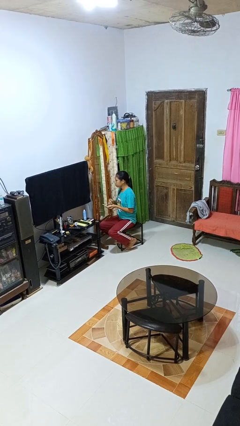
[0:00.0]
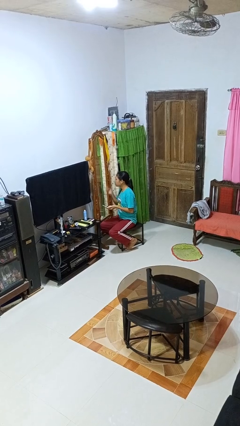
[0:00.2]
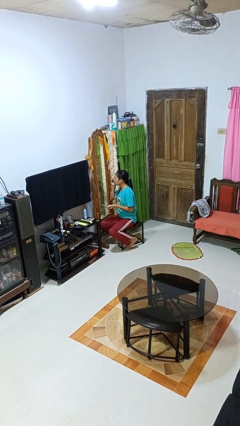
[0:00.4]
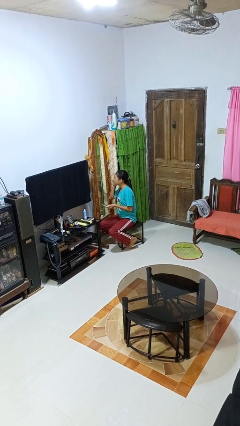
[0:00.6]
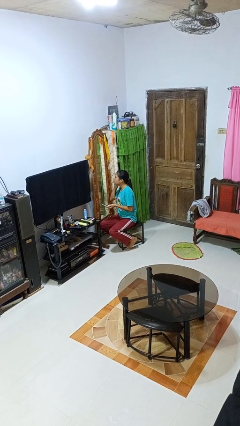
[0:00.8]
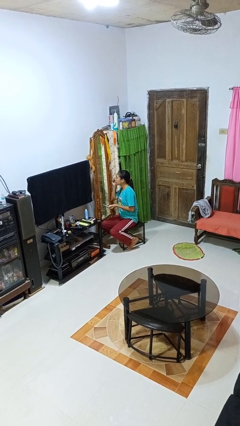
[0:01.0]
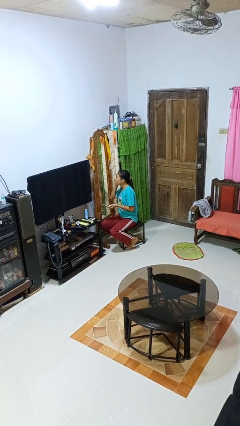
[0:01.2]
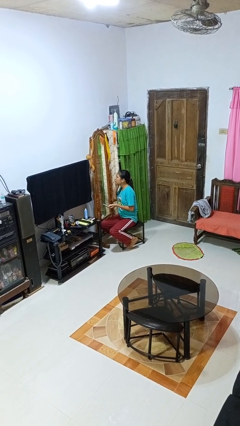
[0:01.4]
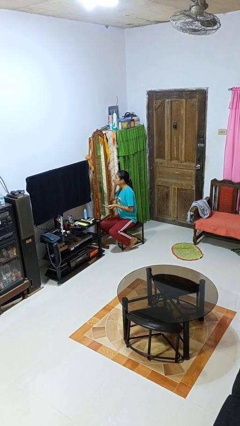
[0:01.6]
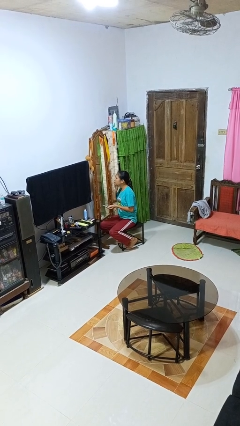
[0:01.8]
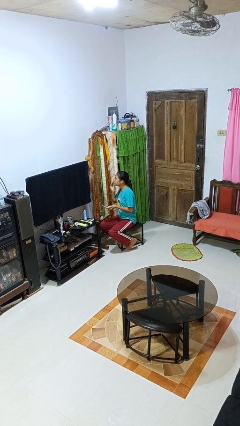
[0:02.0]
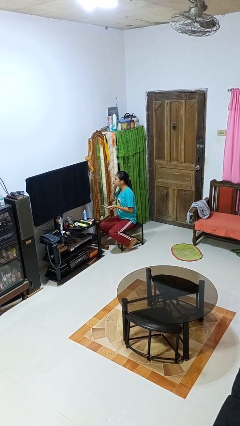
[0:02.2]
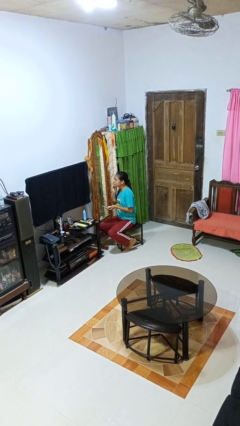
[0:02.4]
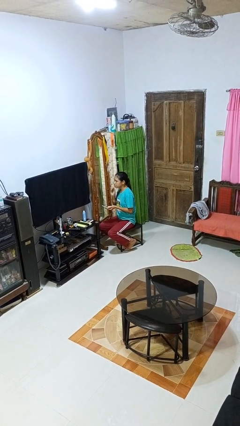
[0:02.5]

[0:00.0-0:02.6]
person applies foundation makeup

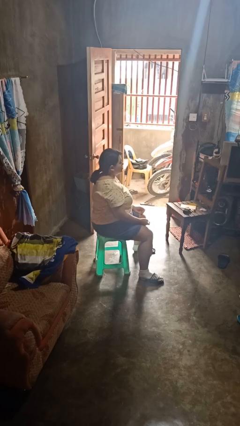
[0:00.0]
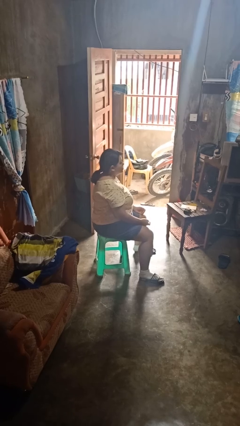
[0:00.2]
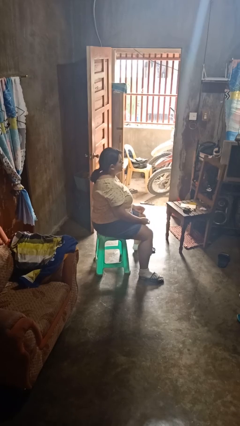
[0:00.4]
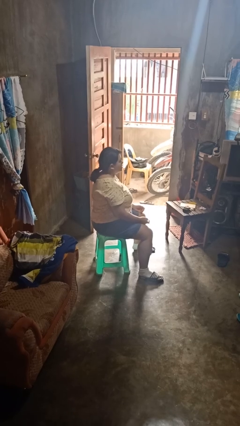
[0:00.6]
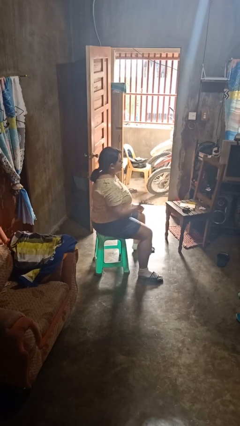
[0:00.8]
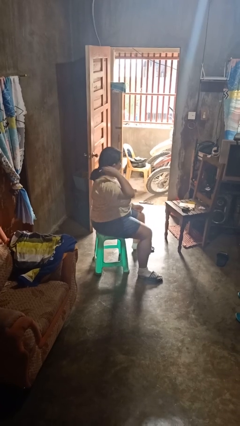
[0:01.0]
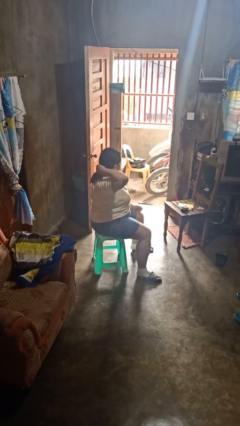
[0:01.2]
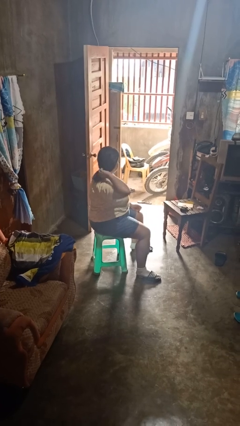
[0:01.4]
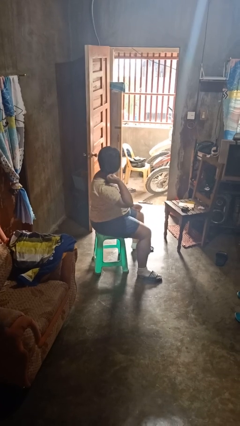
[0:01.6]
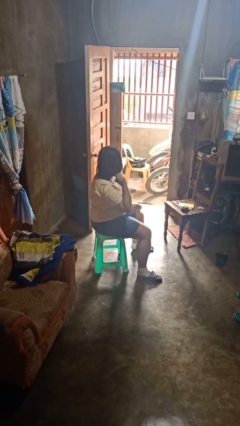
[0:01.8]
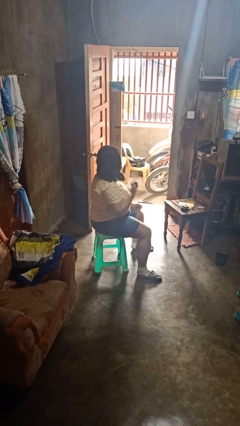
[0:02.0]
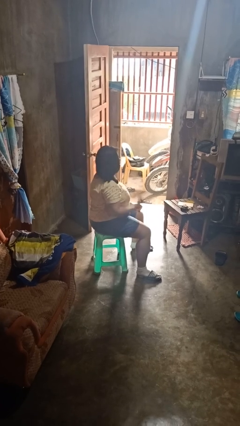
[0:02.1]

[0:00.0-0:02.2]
person takes off hairtie

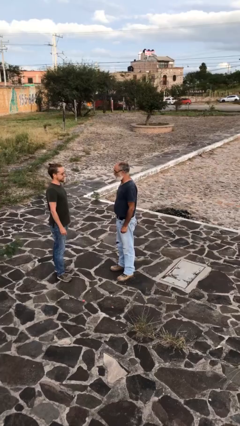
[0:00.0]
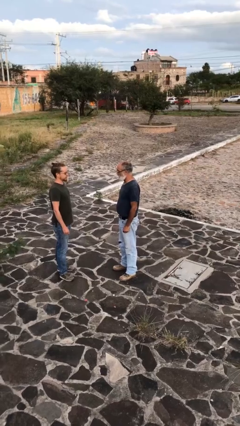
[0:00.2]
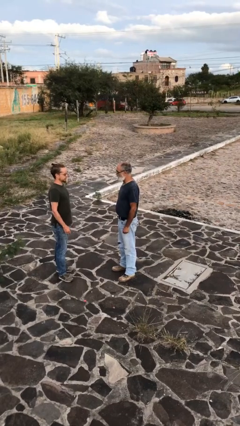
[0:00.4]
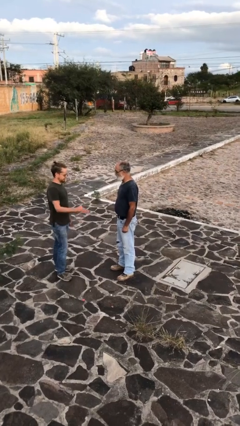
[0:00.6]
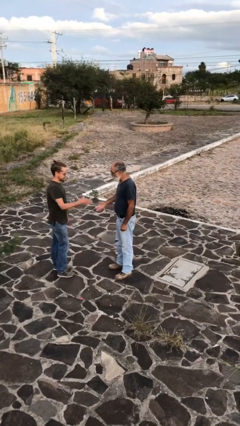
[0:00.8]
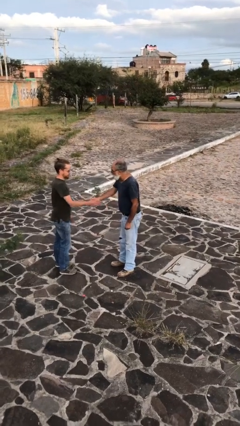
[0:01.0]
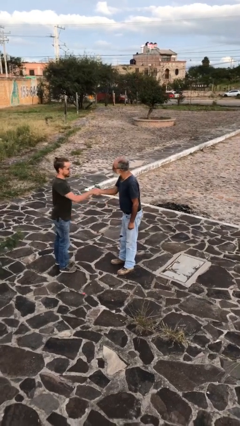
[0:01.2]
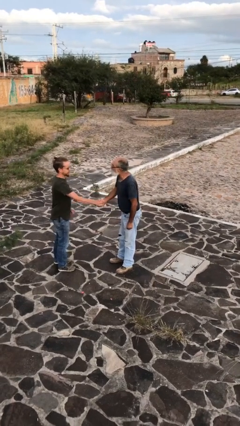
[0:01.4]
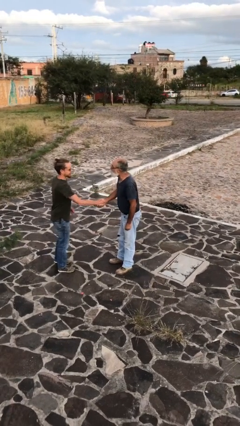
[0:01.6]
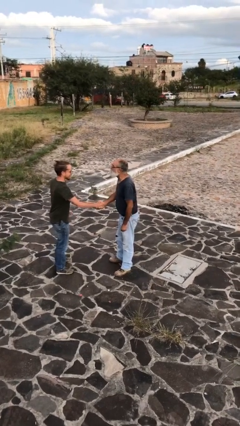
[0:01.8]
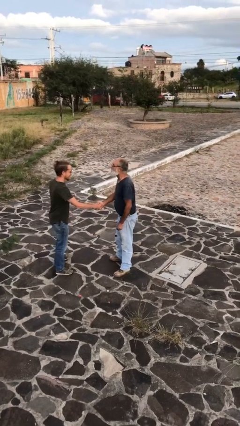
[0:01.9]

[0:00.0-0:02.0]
person shakes hand

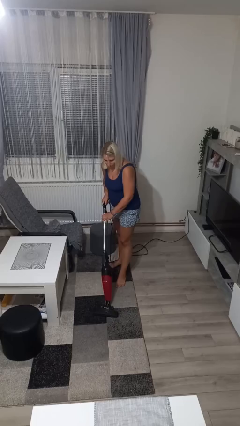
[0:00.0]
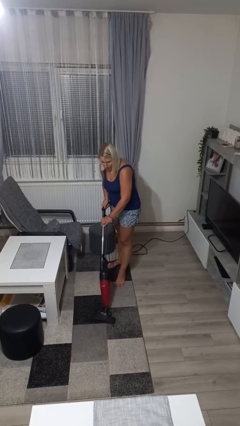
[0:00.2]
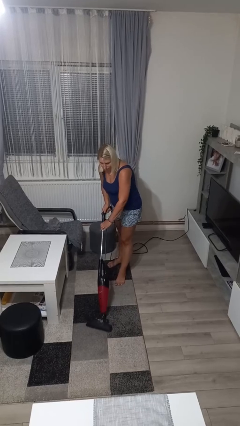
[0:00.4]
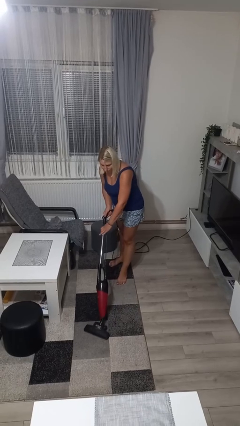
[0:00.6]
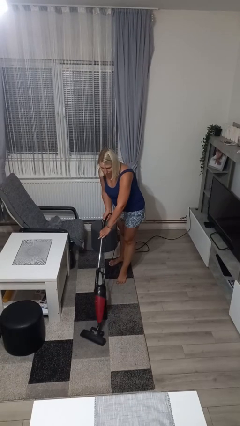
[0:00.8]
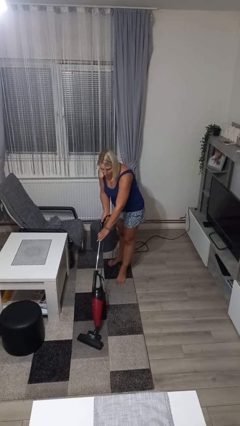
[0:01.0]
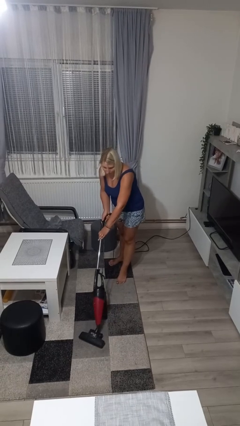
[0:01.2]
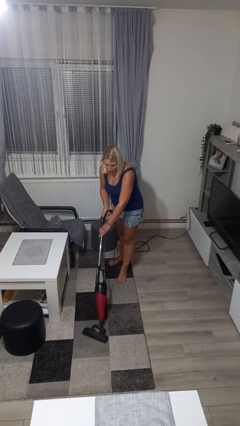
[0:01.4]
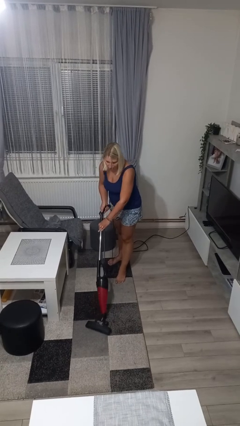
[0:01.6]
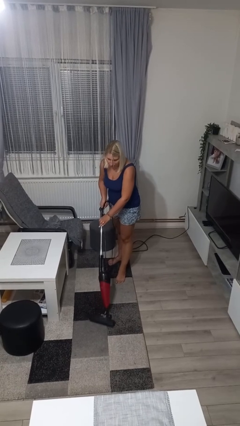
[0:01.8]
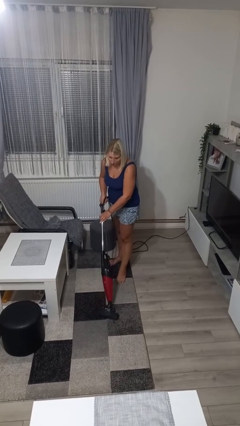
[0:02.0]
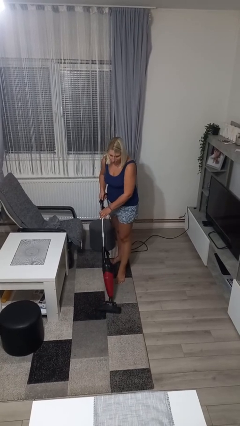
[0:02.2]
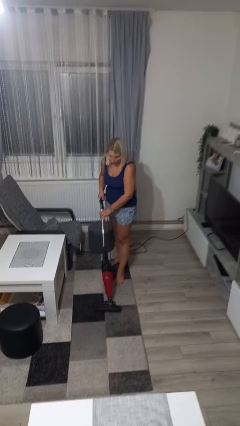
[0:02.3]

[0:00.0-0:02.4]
person vacuums carpet

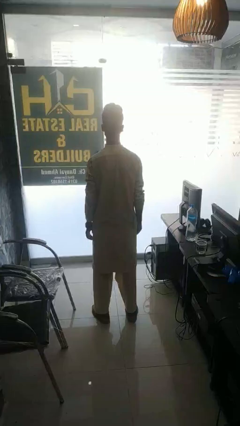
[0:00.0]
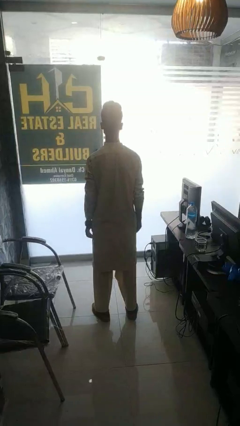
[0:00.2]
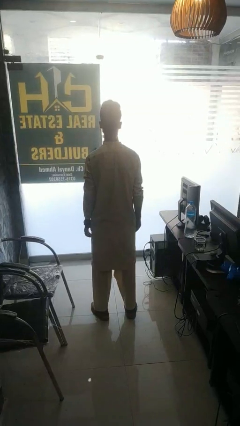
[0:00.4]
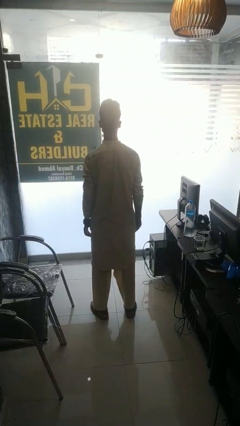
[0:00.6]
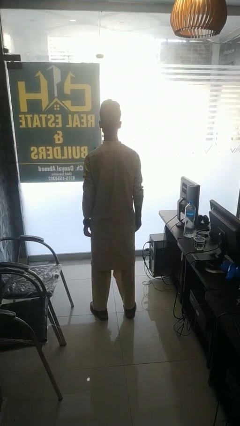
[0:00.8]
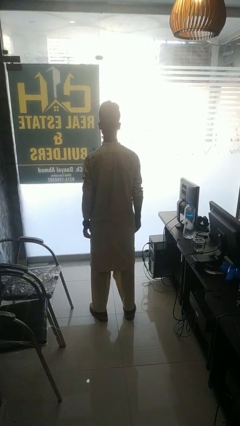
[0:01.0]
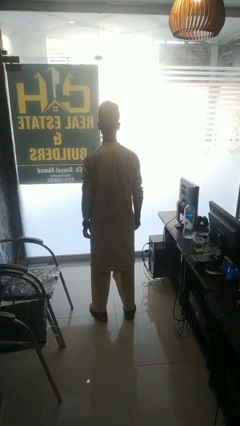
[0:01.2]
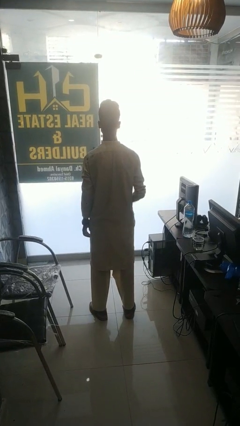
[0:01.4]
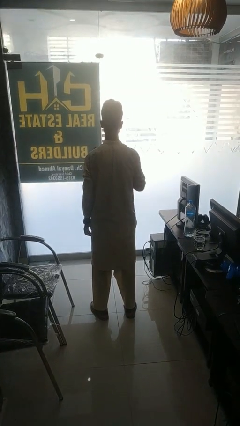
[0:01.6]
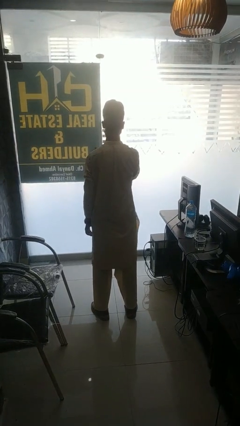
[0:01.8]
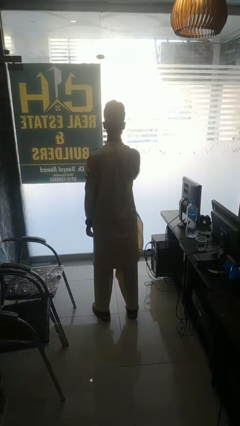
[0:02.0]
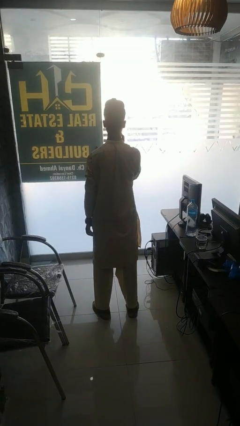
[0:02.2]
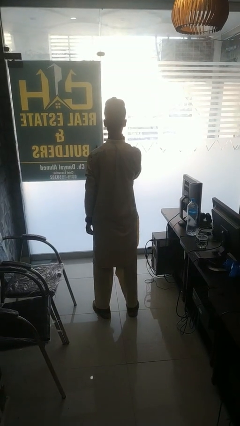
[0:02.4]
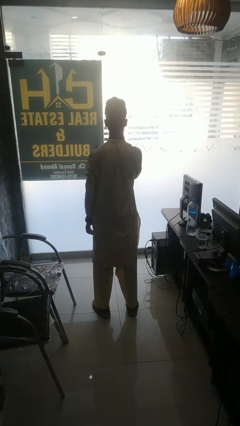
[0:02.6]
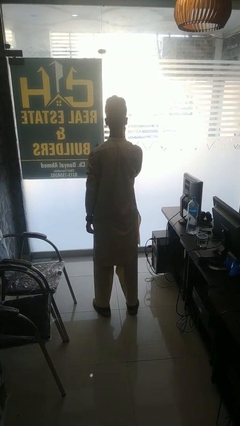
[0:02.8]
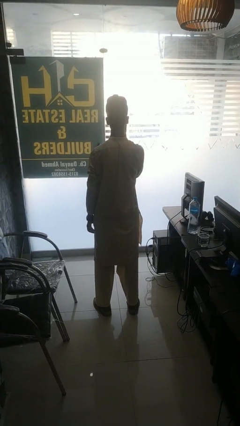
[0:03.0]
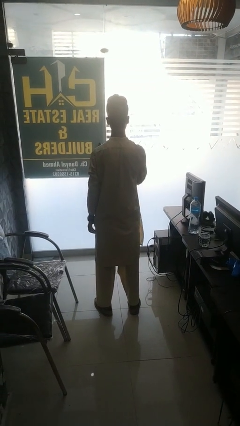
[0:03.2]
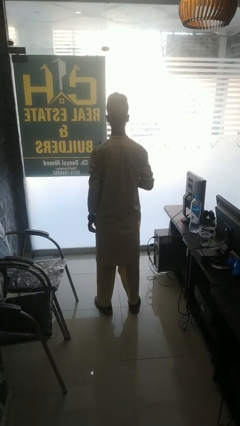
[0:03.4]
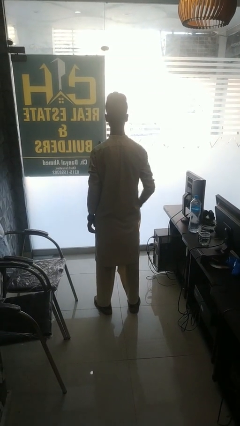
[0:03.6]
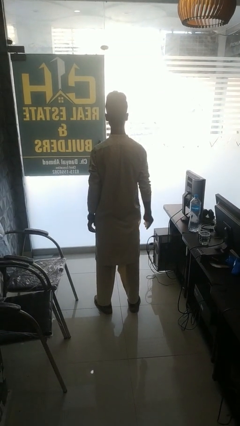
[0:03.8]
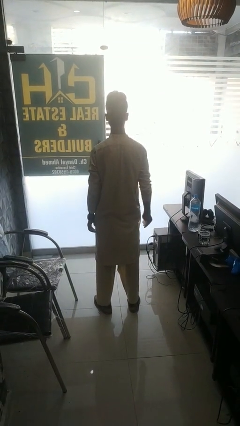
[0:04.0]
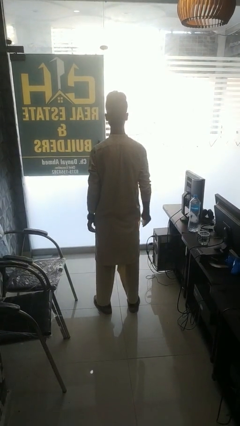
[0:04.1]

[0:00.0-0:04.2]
person wipes mouth with napkin

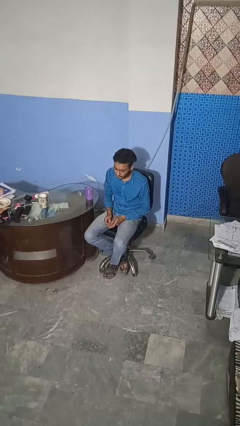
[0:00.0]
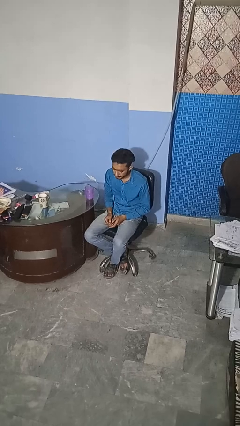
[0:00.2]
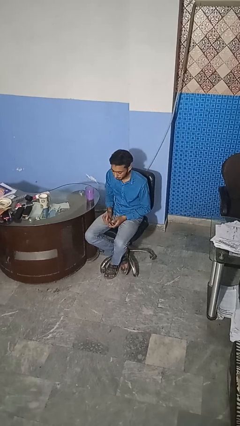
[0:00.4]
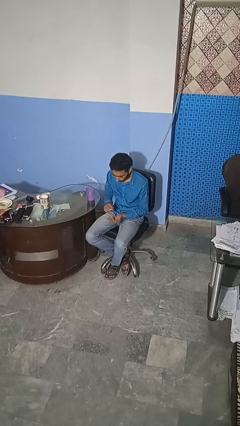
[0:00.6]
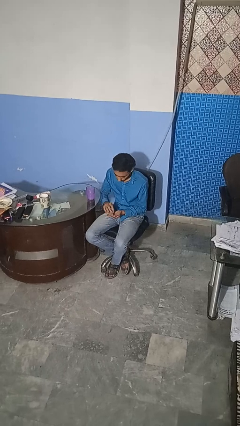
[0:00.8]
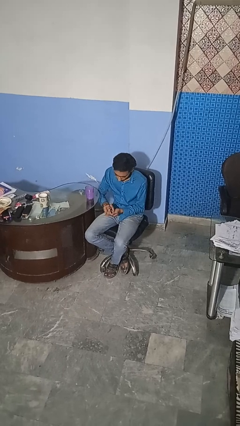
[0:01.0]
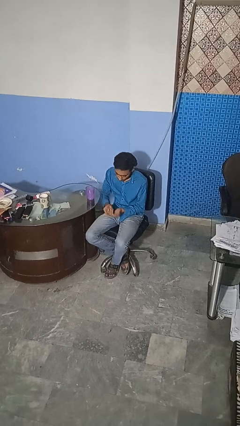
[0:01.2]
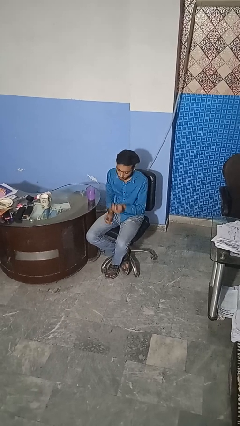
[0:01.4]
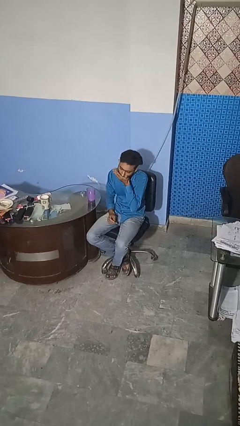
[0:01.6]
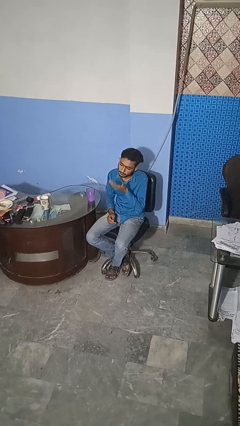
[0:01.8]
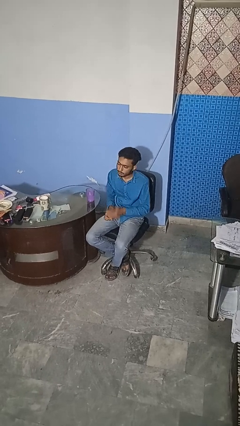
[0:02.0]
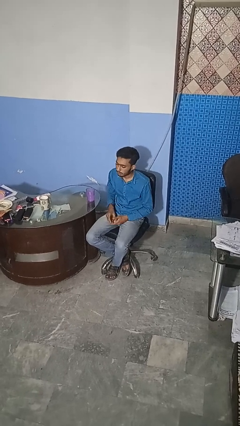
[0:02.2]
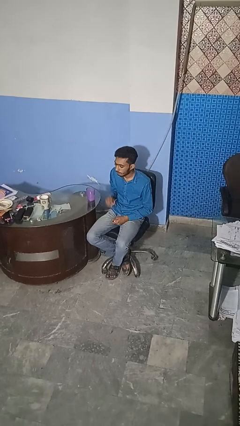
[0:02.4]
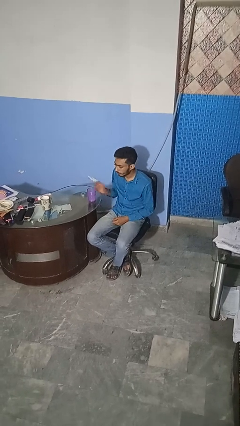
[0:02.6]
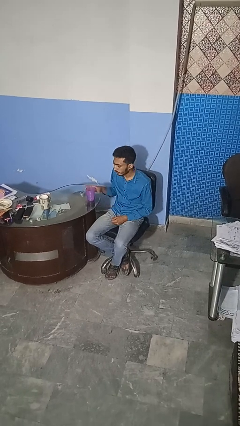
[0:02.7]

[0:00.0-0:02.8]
person takes medicine pills

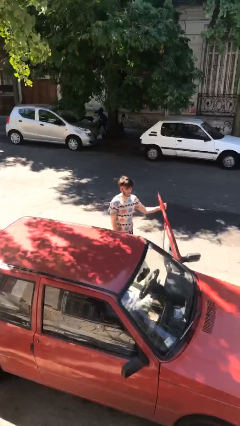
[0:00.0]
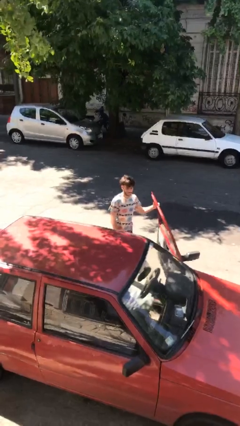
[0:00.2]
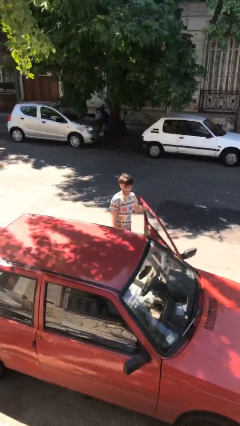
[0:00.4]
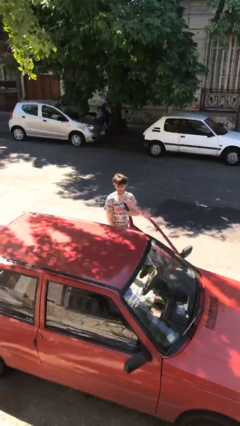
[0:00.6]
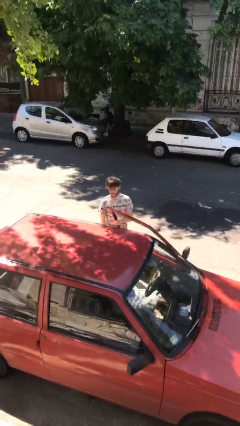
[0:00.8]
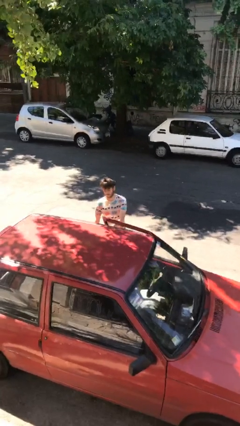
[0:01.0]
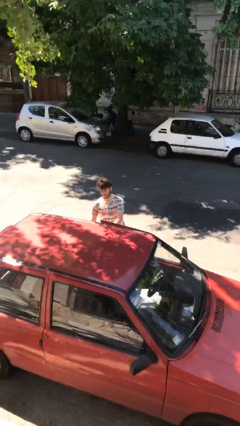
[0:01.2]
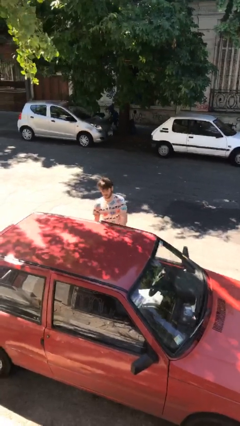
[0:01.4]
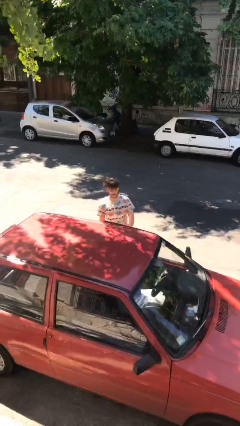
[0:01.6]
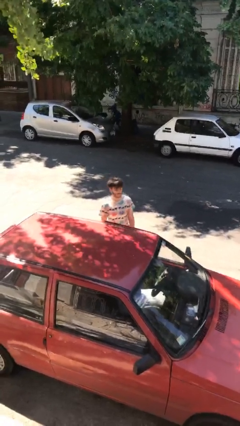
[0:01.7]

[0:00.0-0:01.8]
person closes car door
